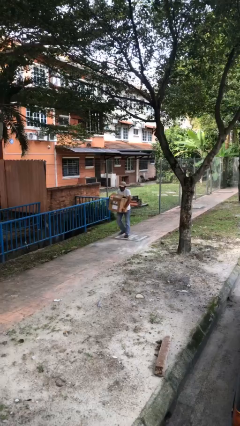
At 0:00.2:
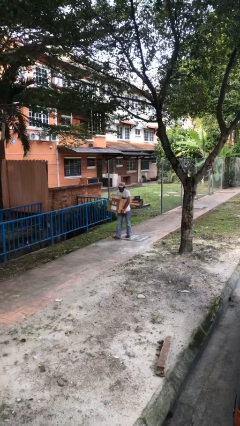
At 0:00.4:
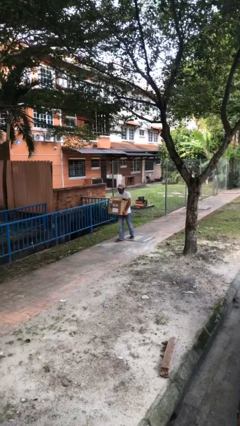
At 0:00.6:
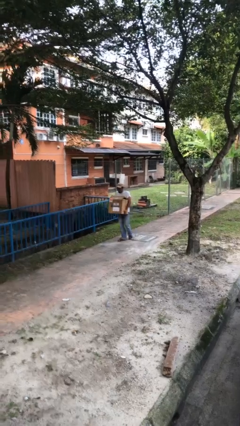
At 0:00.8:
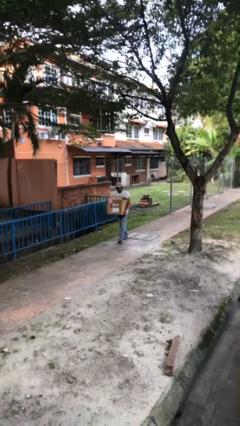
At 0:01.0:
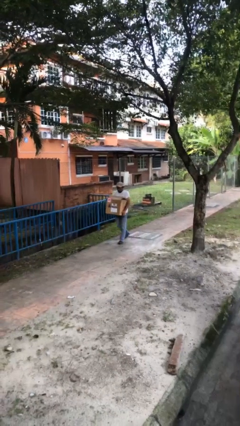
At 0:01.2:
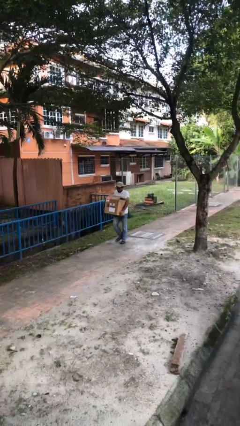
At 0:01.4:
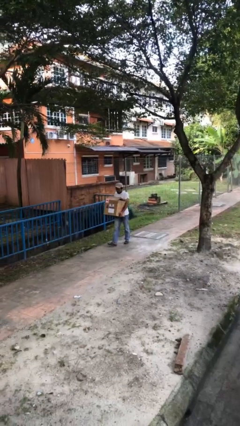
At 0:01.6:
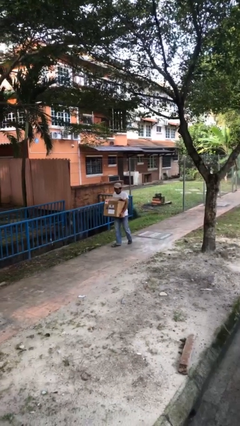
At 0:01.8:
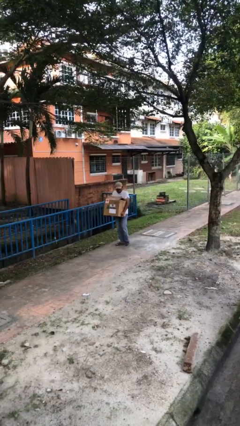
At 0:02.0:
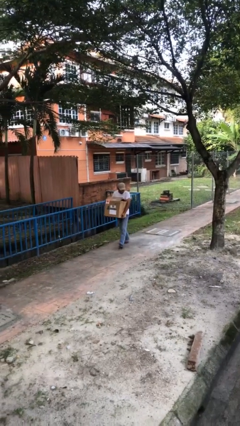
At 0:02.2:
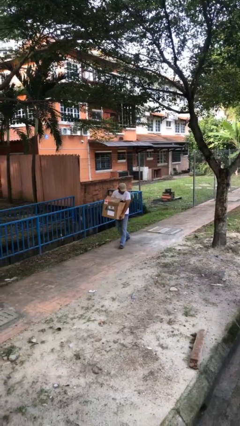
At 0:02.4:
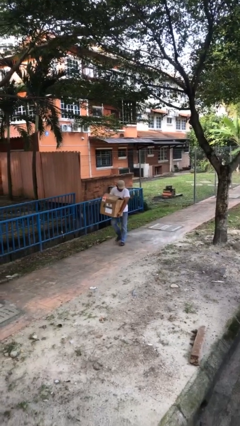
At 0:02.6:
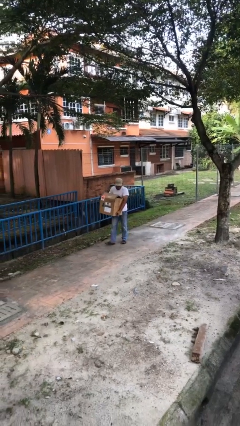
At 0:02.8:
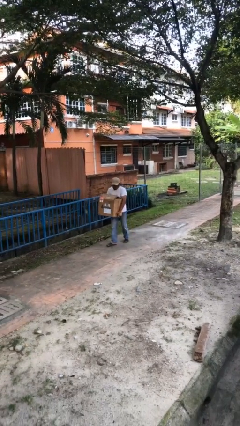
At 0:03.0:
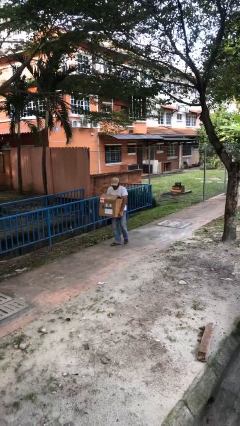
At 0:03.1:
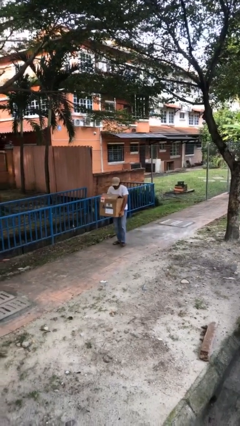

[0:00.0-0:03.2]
person carries heavy object

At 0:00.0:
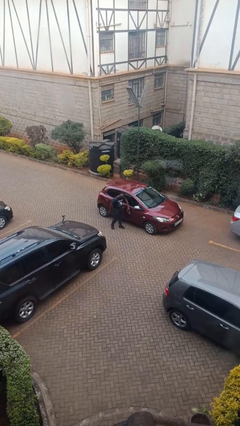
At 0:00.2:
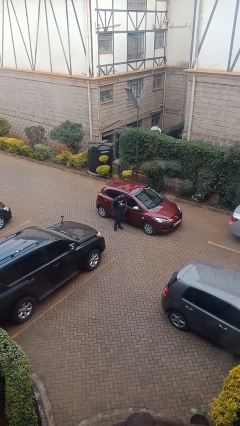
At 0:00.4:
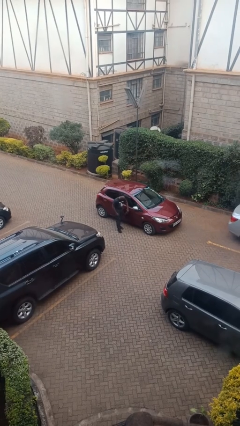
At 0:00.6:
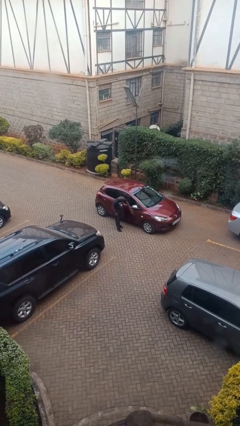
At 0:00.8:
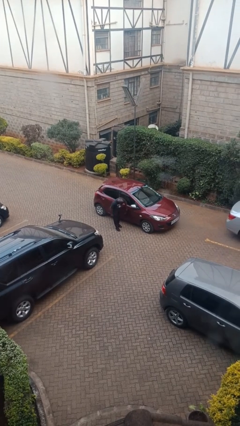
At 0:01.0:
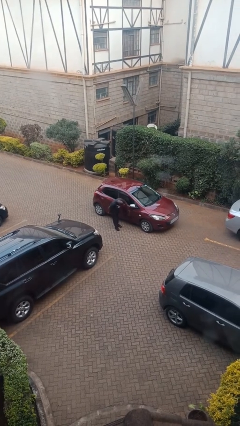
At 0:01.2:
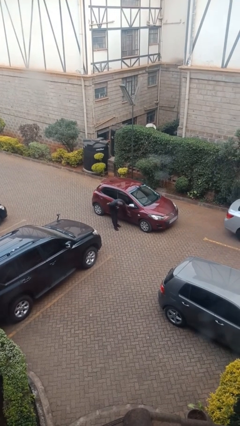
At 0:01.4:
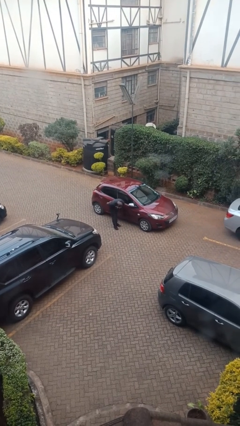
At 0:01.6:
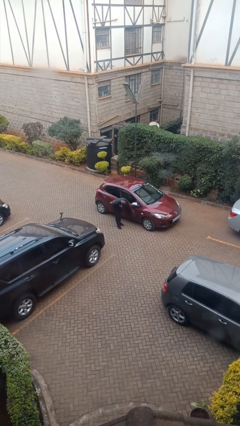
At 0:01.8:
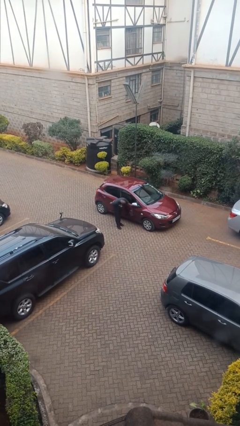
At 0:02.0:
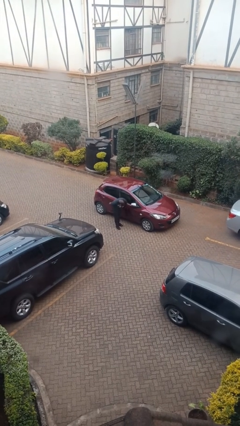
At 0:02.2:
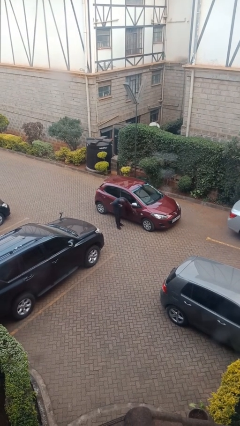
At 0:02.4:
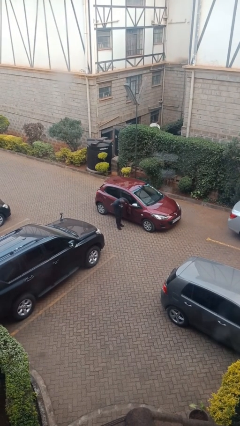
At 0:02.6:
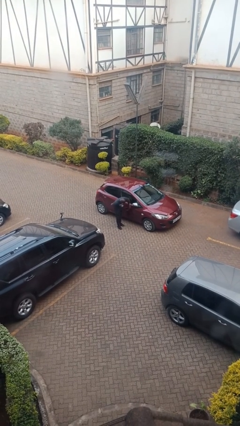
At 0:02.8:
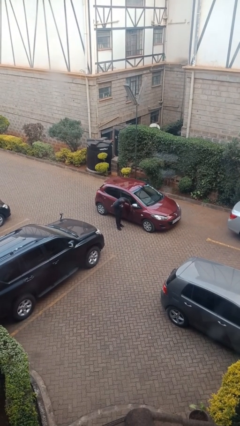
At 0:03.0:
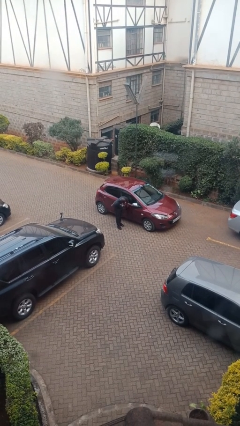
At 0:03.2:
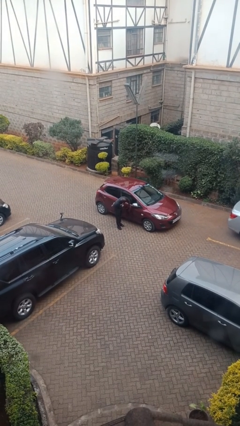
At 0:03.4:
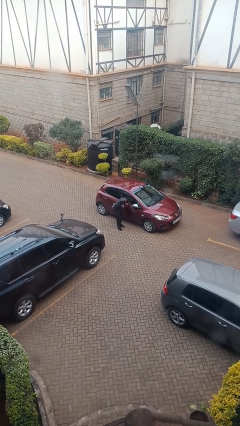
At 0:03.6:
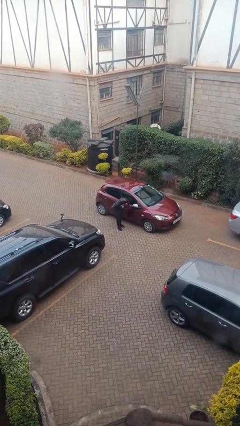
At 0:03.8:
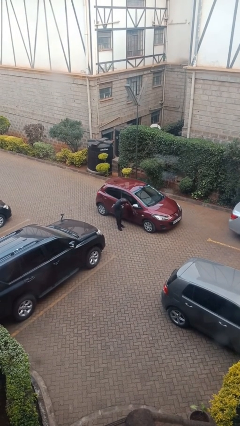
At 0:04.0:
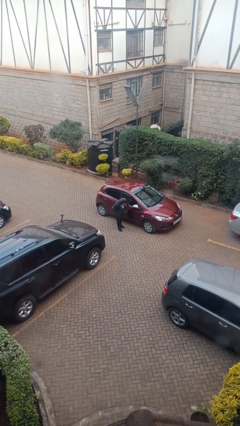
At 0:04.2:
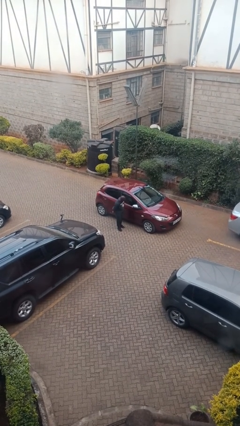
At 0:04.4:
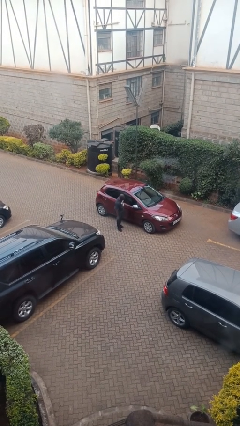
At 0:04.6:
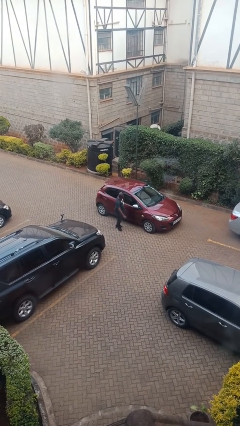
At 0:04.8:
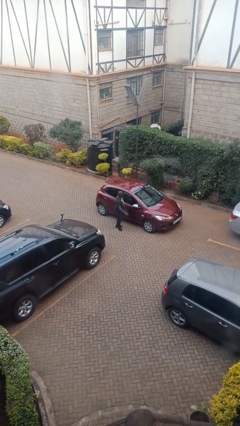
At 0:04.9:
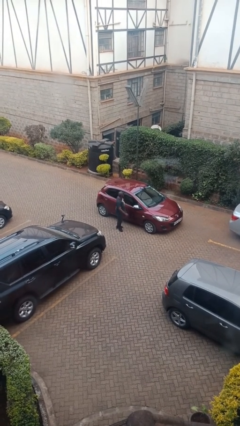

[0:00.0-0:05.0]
person polishes car with rag

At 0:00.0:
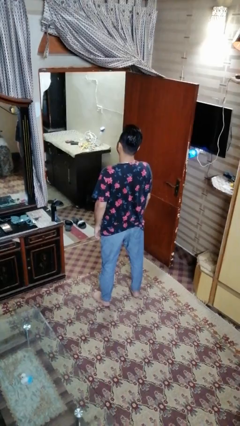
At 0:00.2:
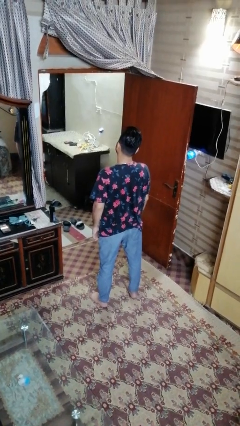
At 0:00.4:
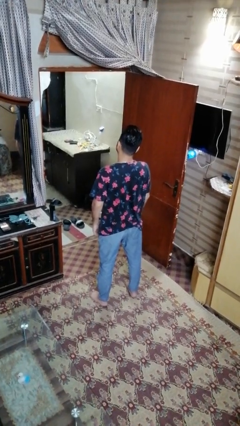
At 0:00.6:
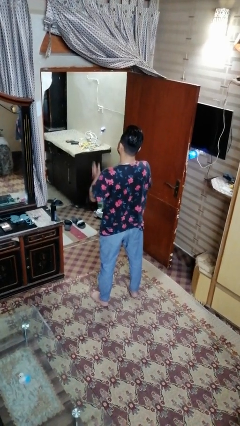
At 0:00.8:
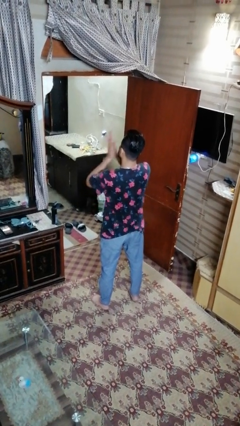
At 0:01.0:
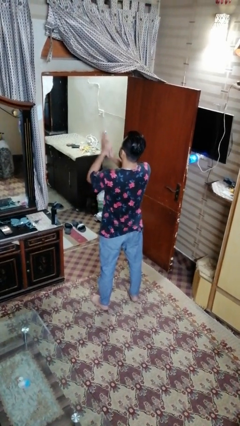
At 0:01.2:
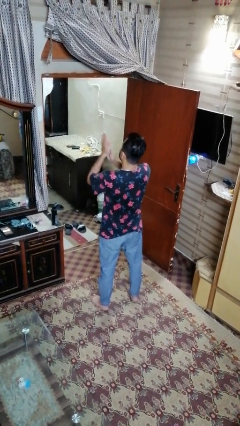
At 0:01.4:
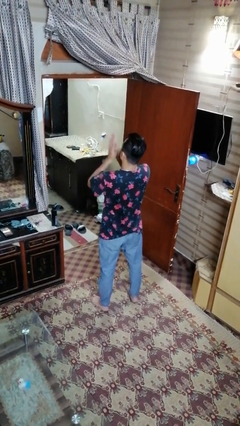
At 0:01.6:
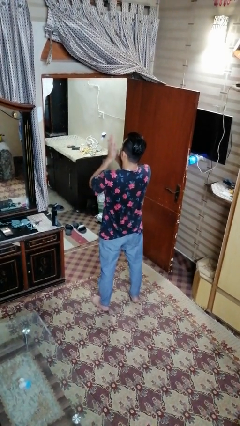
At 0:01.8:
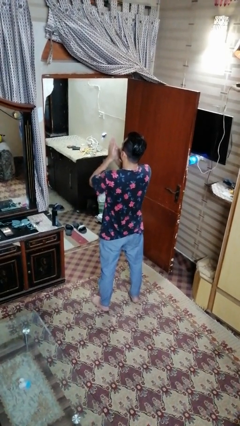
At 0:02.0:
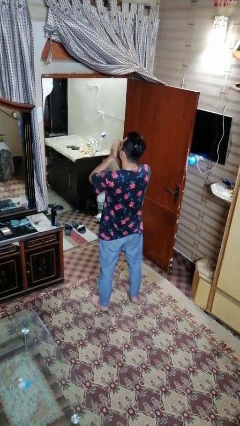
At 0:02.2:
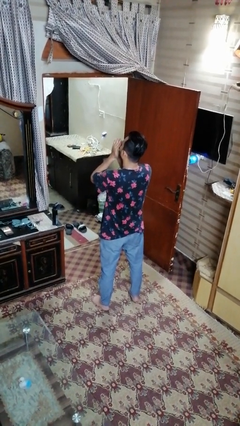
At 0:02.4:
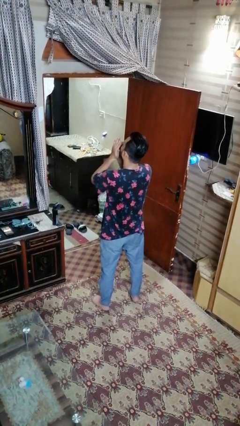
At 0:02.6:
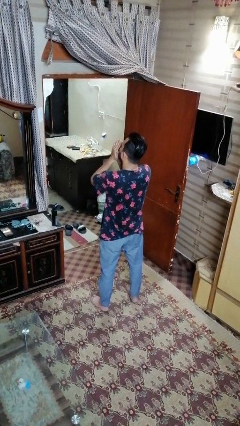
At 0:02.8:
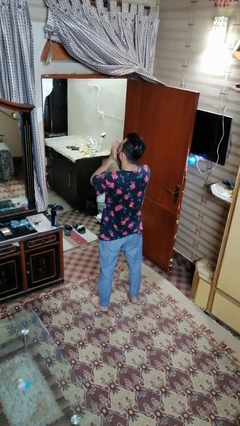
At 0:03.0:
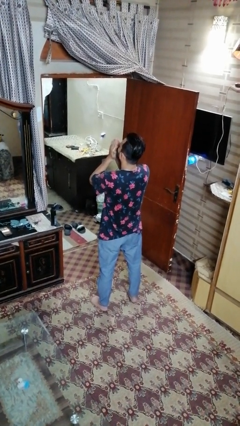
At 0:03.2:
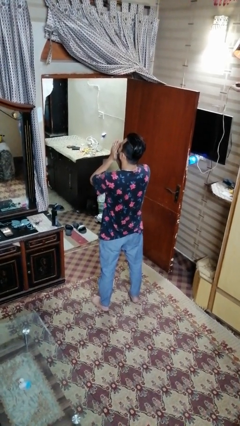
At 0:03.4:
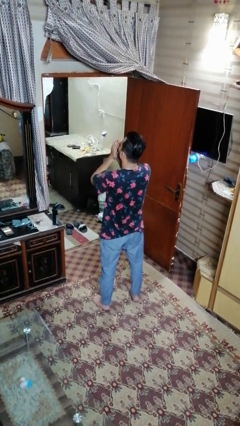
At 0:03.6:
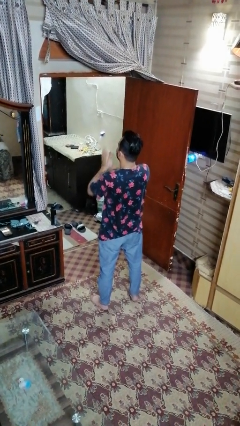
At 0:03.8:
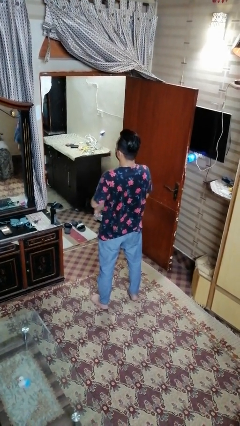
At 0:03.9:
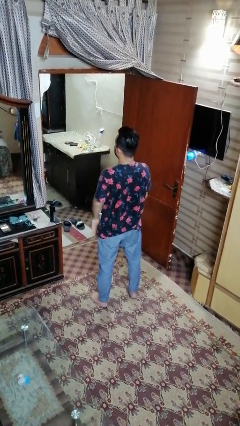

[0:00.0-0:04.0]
person blows into hands

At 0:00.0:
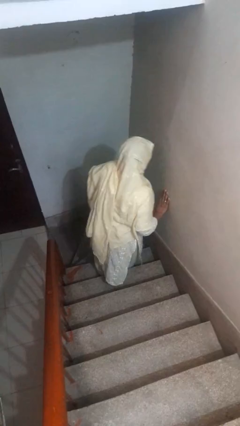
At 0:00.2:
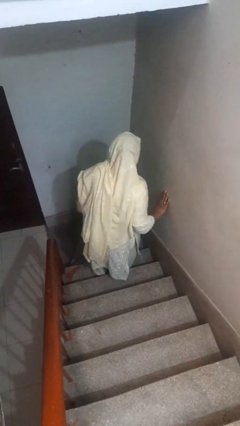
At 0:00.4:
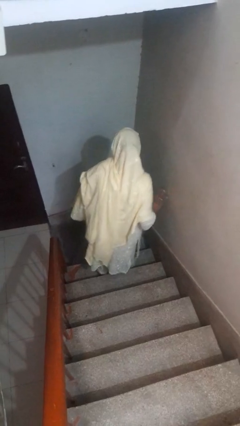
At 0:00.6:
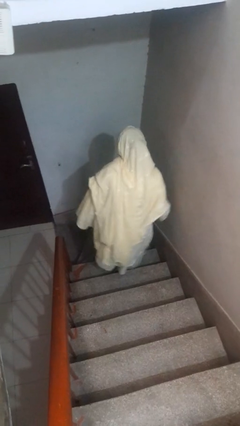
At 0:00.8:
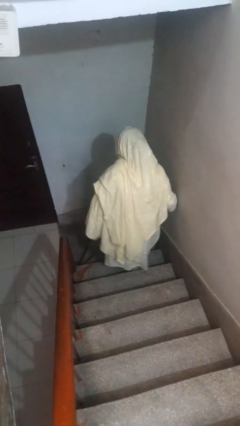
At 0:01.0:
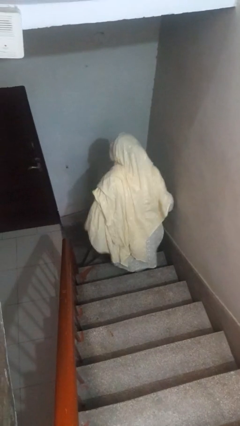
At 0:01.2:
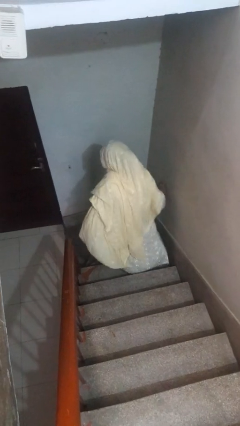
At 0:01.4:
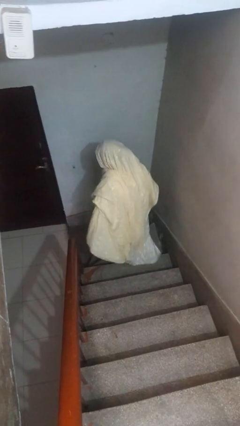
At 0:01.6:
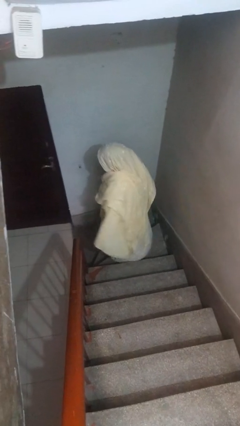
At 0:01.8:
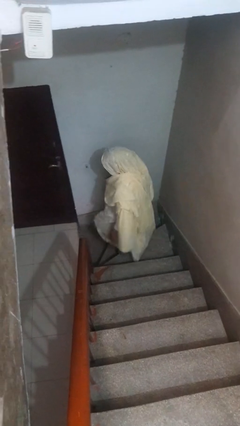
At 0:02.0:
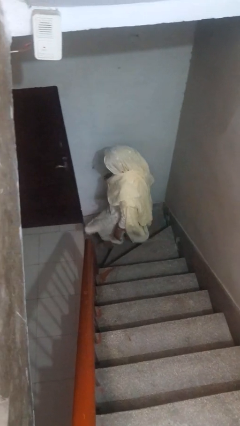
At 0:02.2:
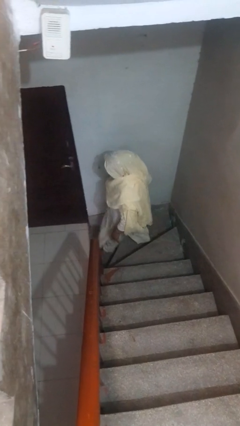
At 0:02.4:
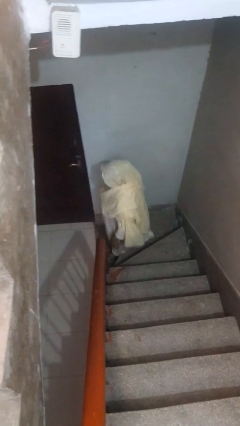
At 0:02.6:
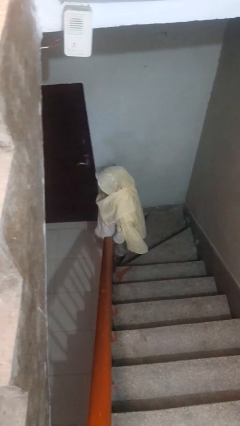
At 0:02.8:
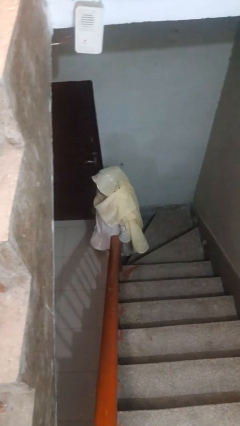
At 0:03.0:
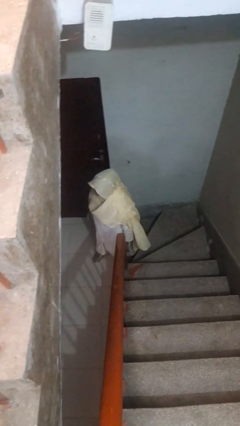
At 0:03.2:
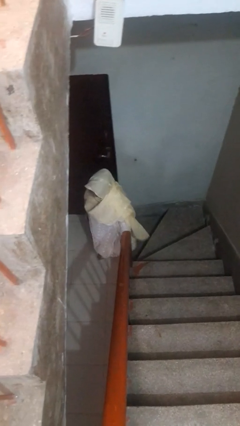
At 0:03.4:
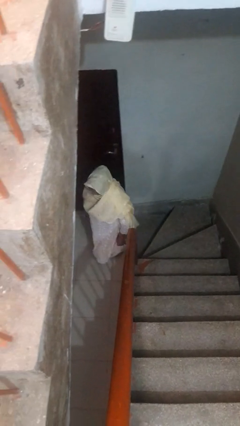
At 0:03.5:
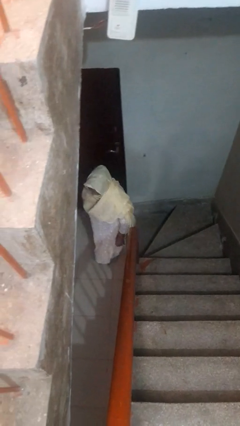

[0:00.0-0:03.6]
person climbs down stairs

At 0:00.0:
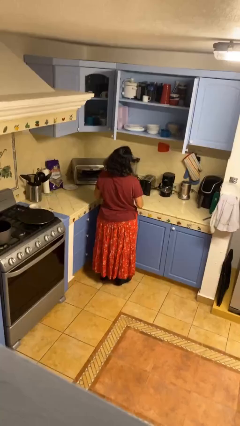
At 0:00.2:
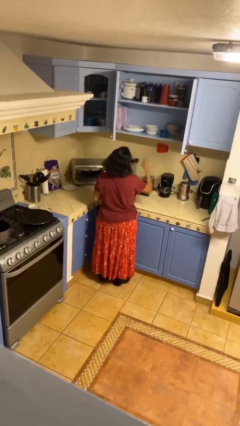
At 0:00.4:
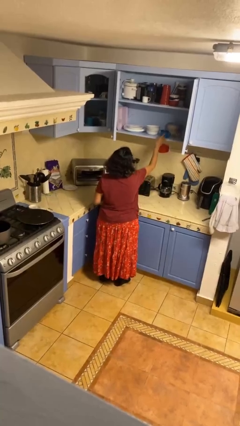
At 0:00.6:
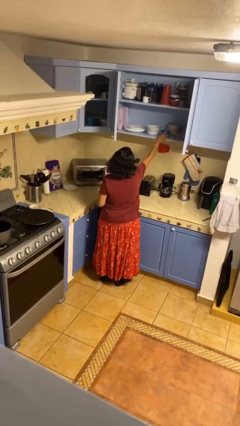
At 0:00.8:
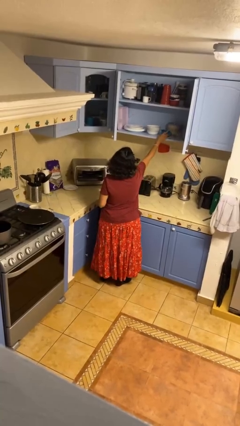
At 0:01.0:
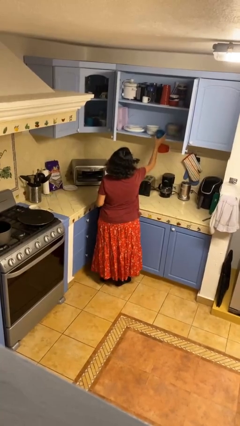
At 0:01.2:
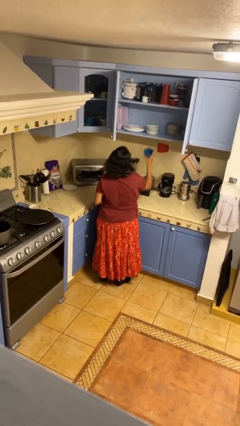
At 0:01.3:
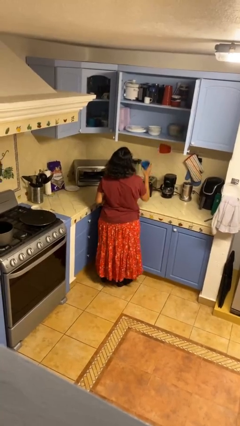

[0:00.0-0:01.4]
person picks up object from cabinet

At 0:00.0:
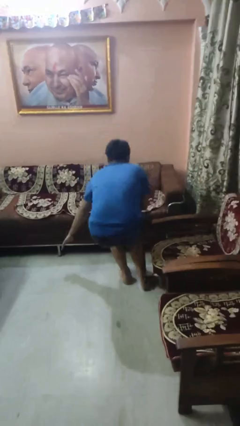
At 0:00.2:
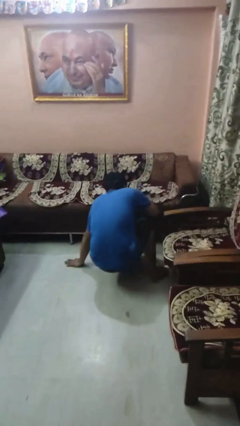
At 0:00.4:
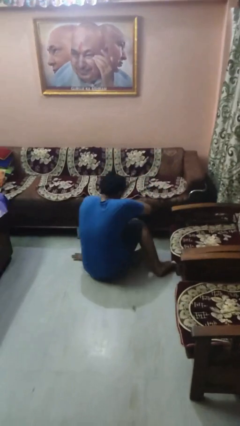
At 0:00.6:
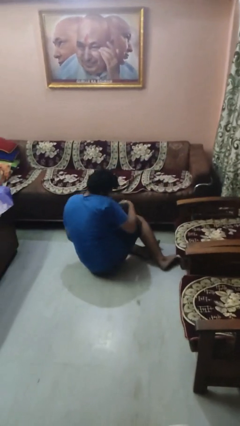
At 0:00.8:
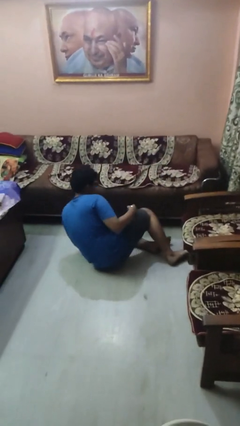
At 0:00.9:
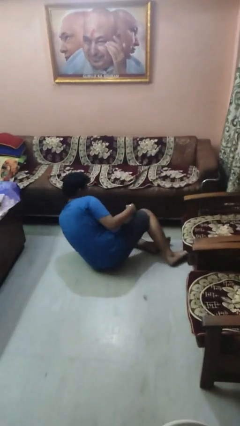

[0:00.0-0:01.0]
person trips on object on floor
